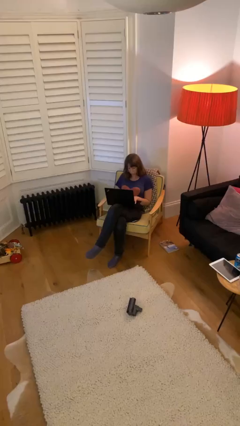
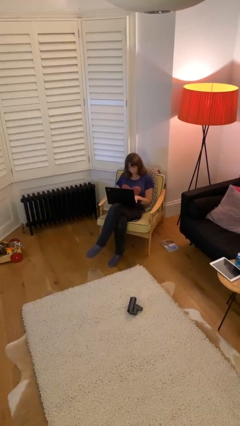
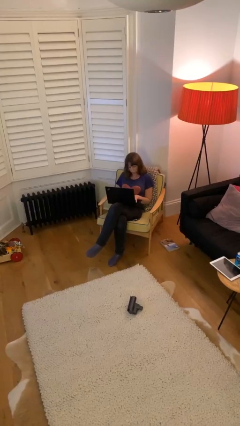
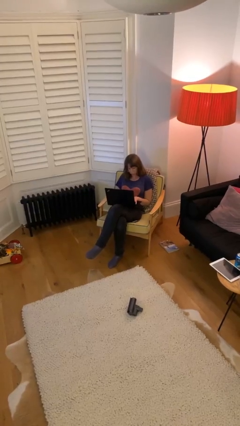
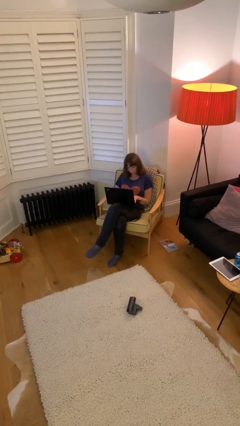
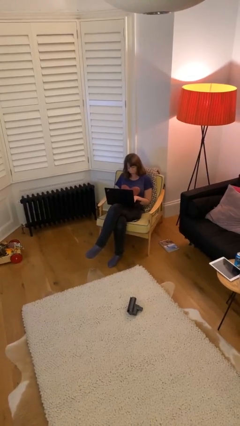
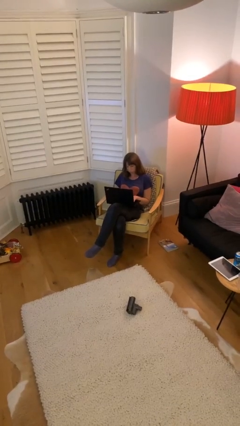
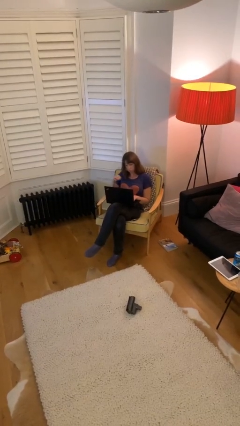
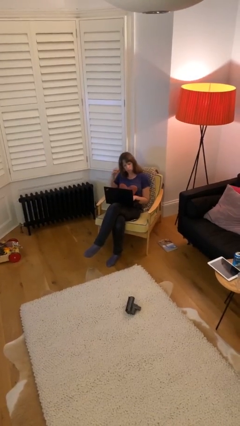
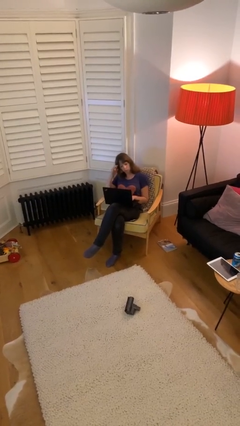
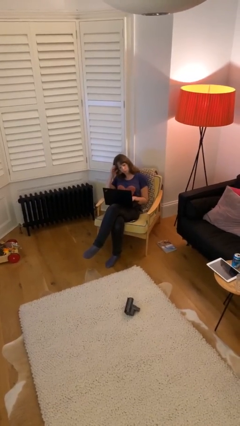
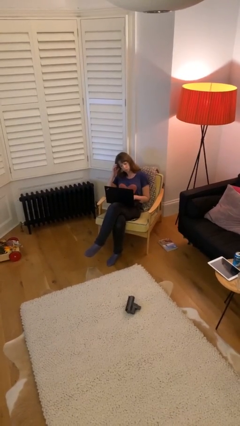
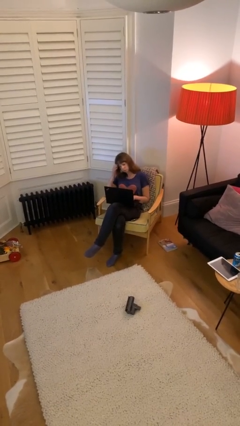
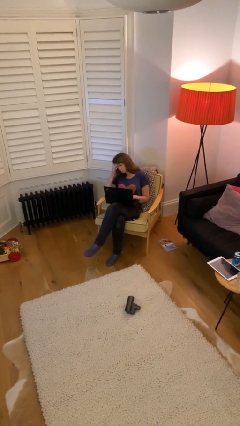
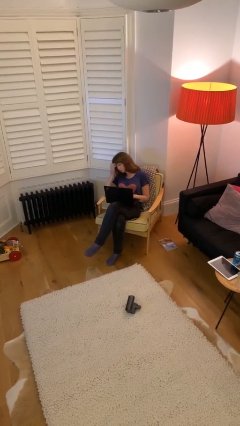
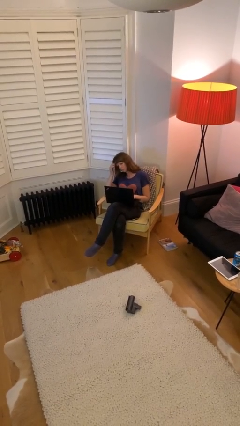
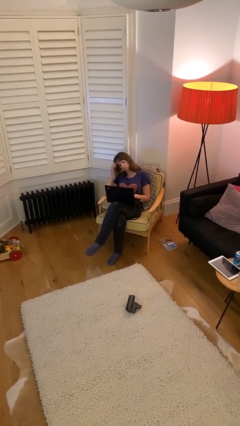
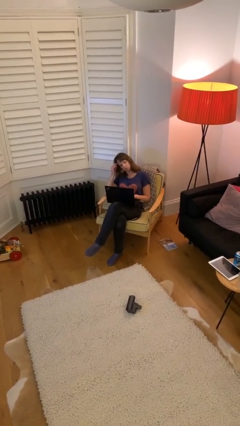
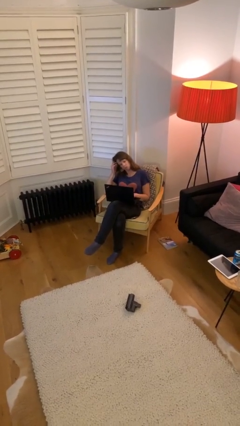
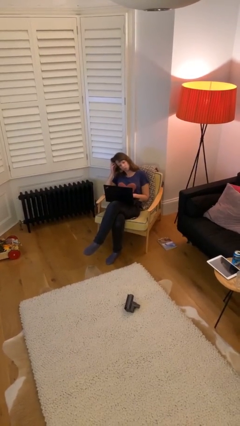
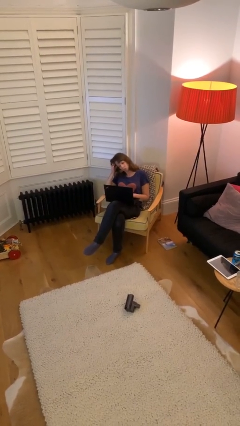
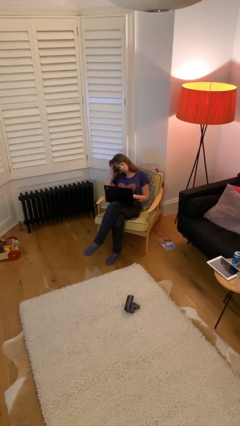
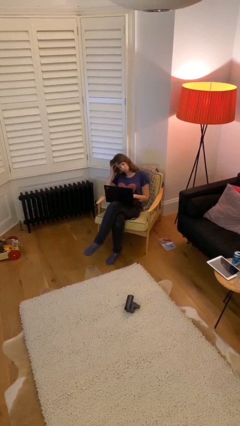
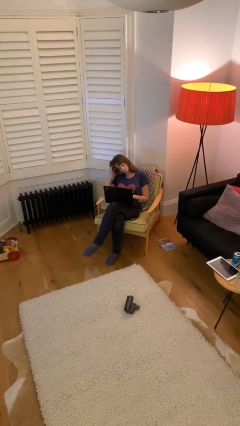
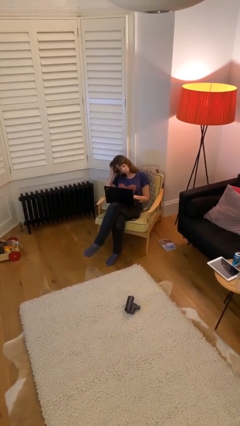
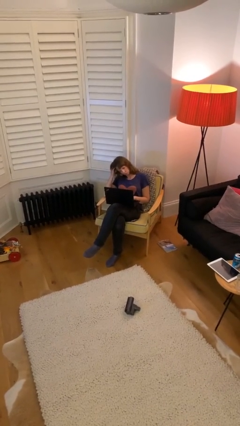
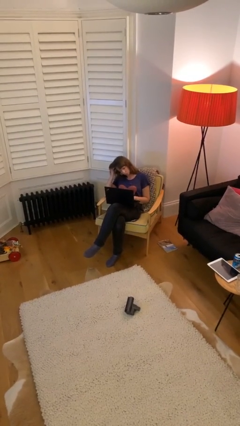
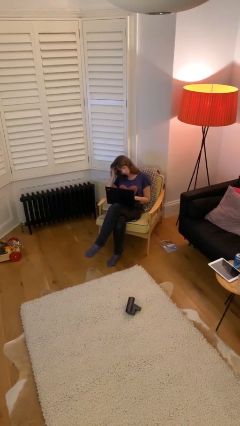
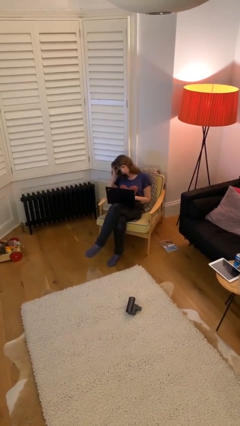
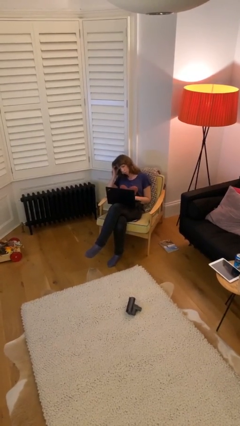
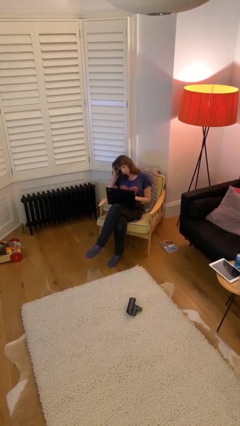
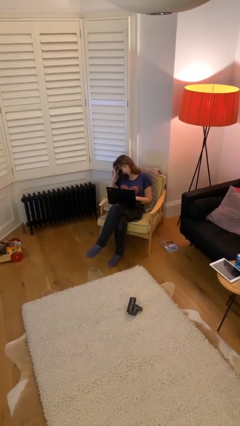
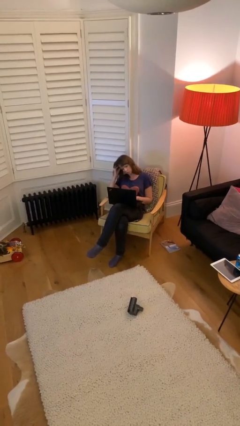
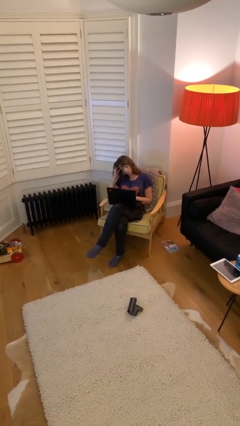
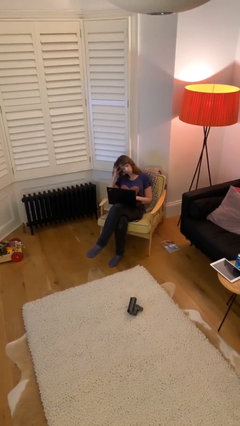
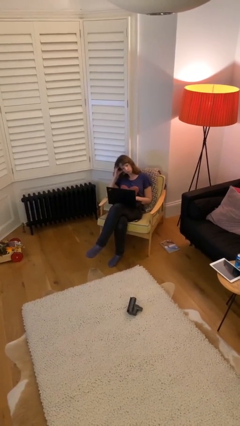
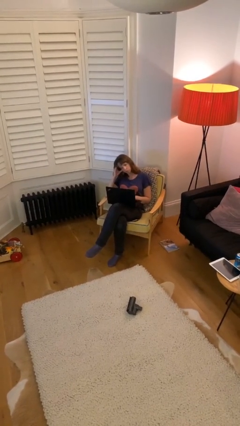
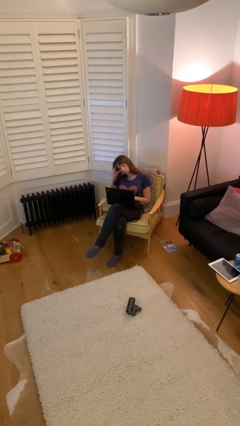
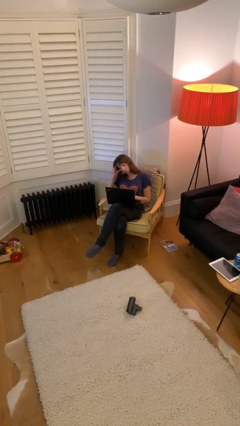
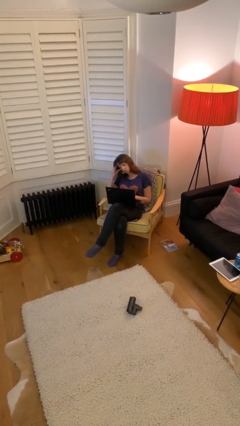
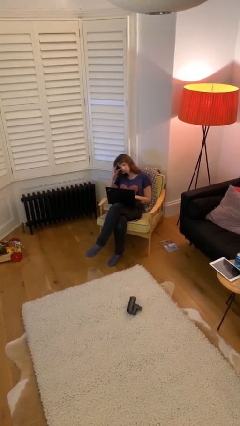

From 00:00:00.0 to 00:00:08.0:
person interacts with laptop

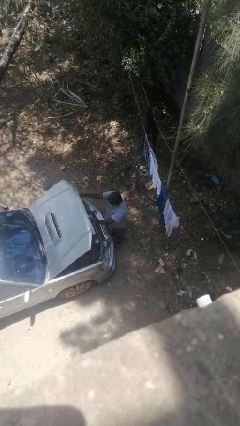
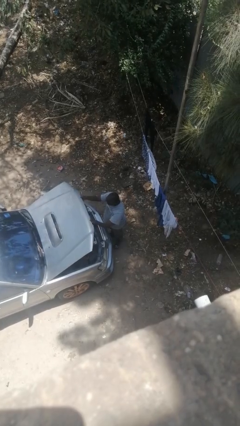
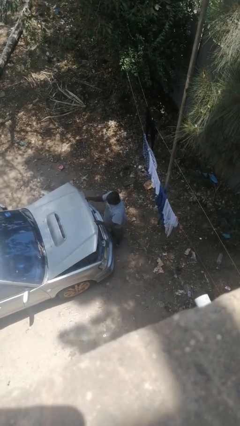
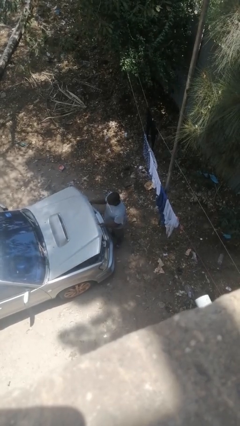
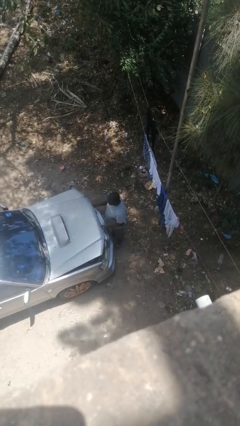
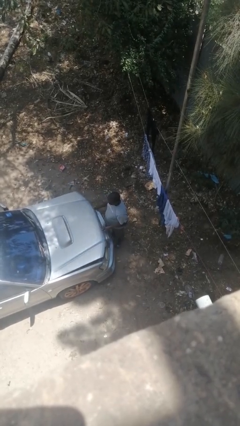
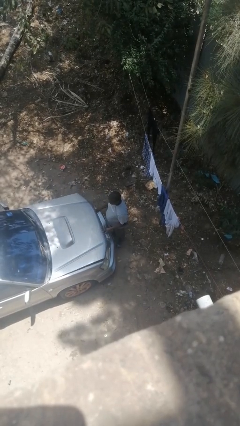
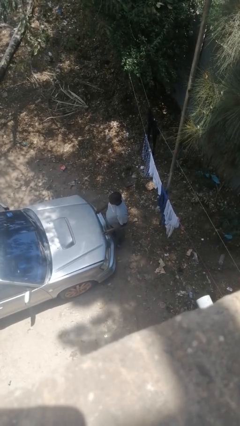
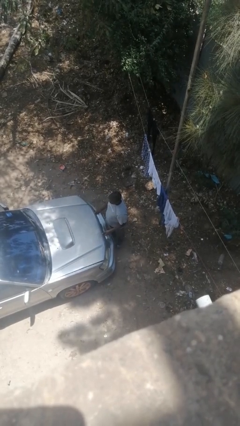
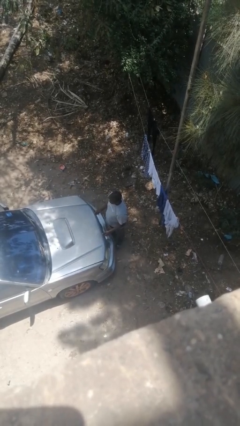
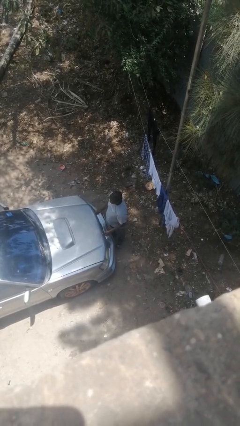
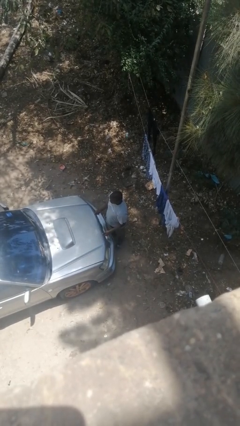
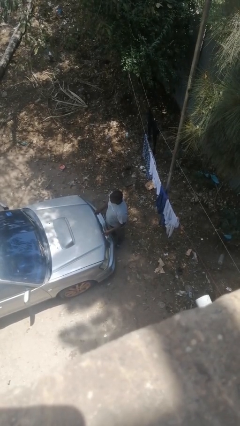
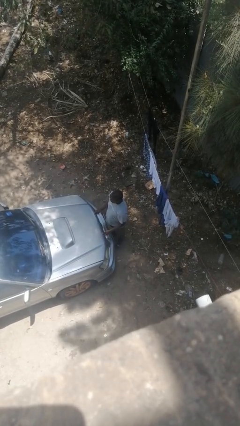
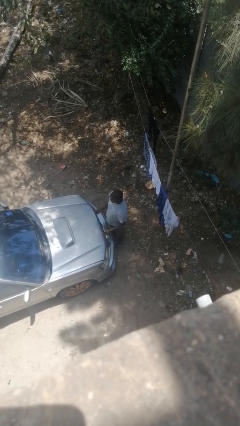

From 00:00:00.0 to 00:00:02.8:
person closes car hood

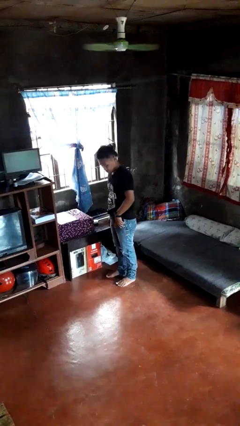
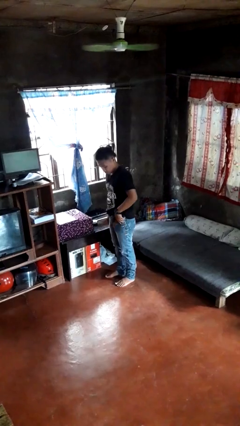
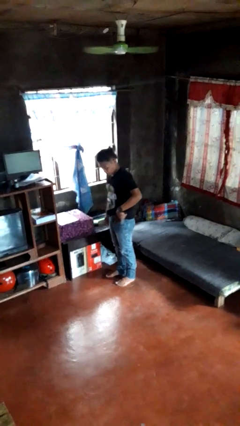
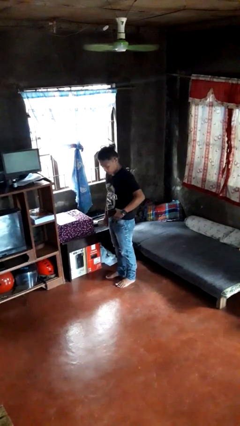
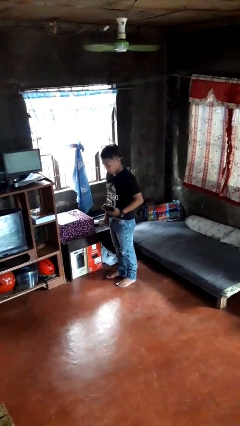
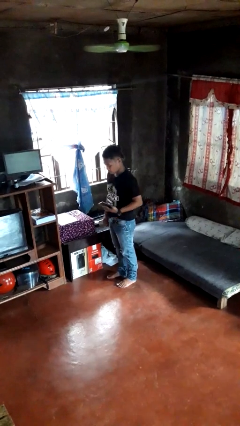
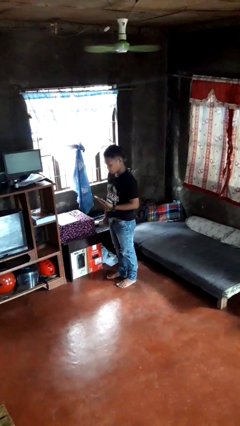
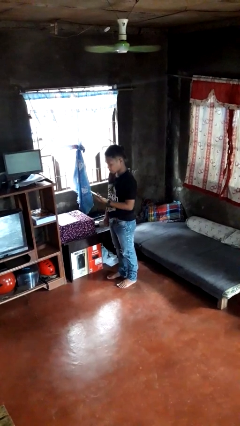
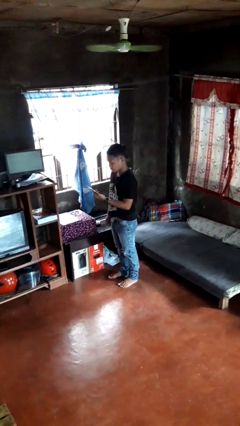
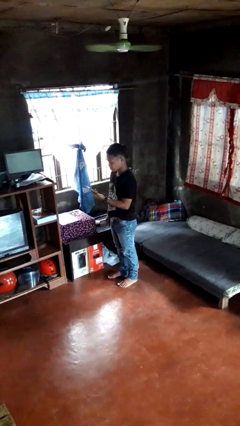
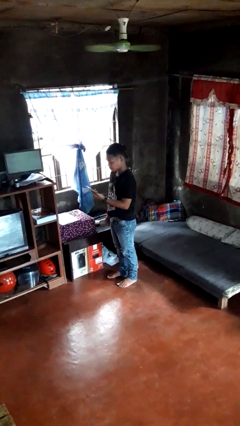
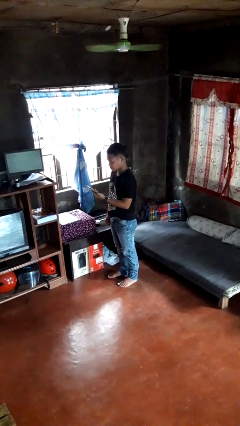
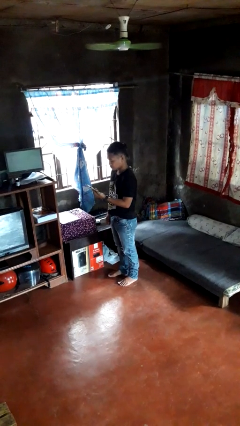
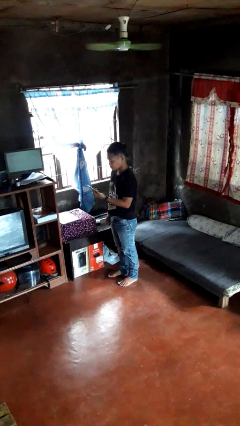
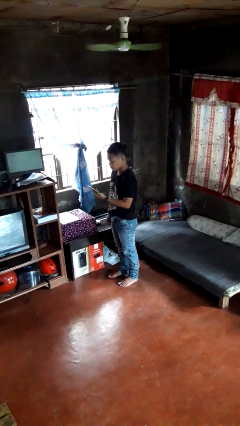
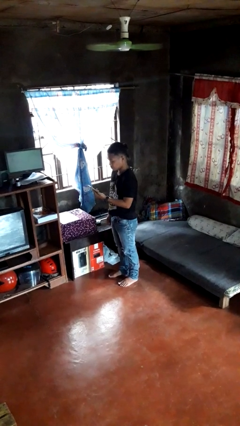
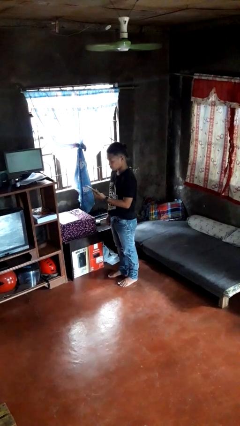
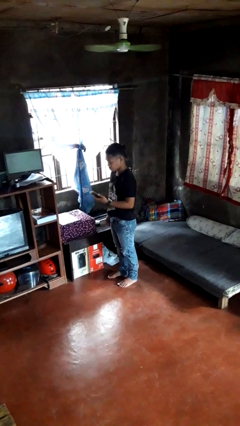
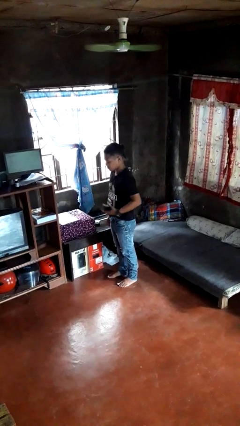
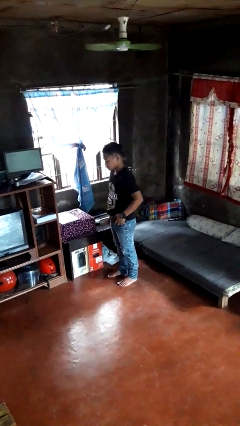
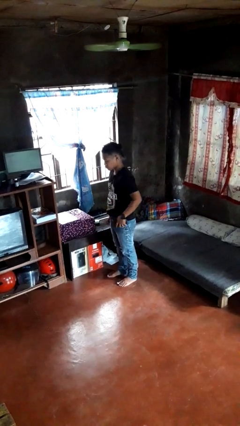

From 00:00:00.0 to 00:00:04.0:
person takes phone from pocket

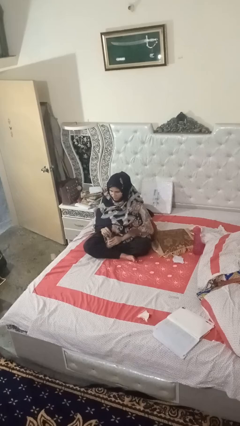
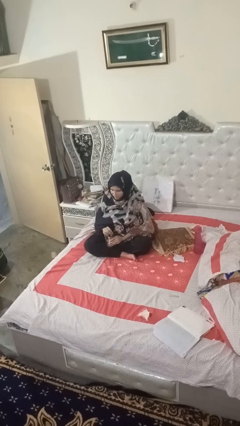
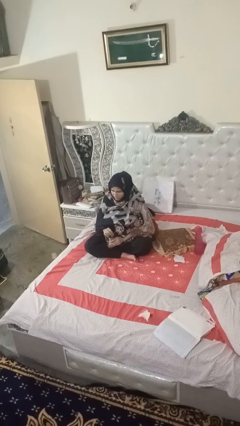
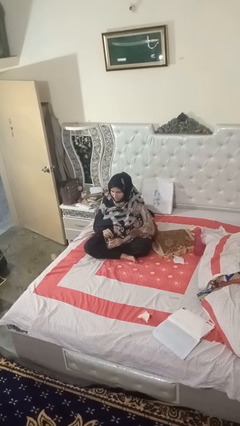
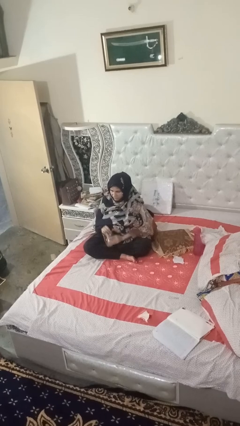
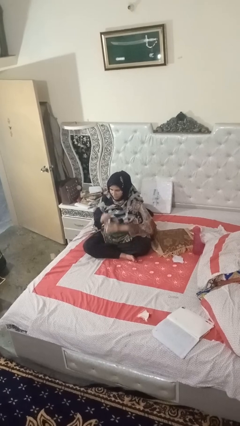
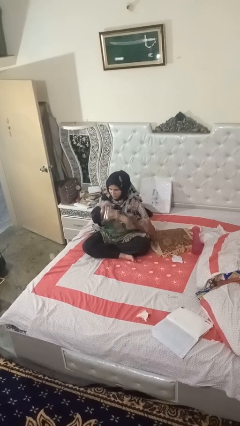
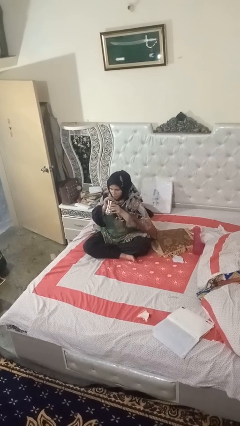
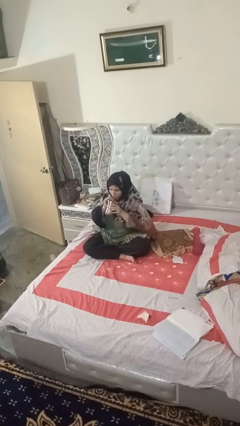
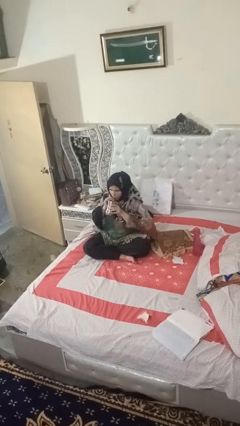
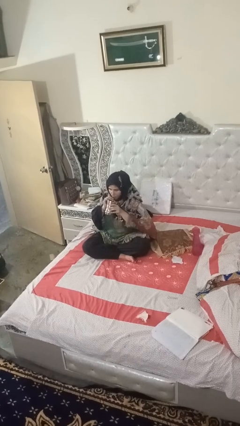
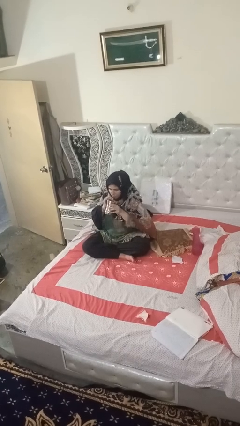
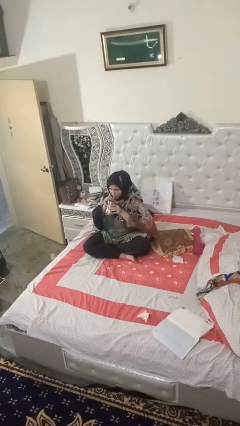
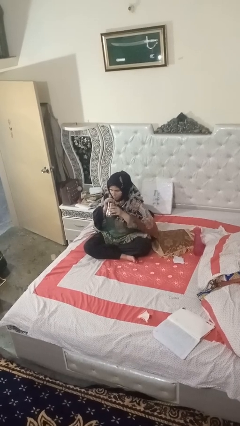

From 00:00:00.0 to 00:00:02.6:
person drinks from straw
